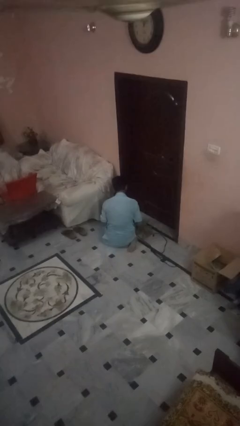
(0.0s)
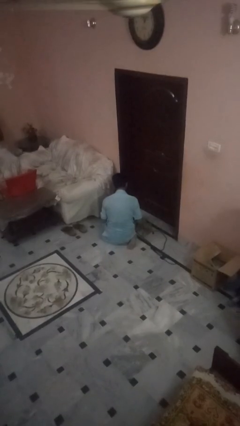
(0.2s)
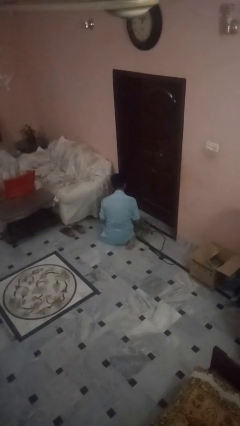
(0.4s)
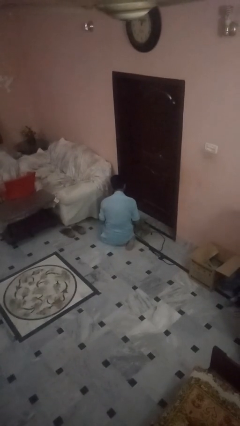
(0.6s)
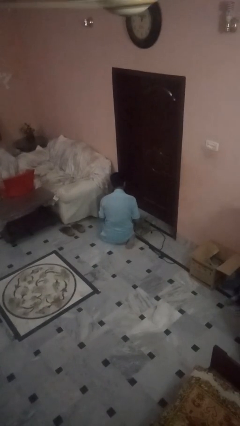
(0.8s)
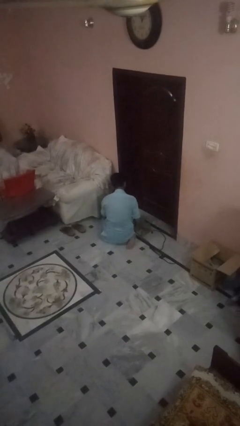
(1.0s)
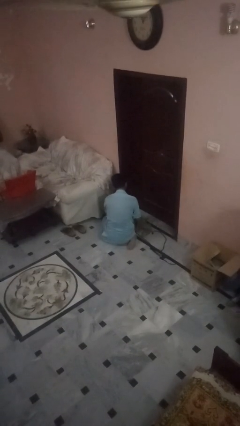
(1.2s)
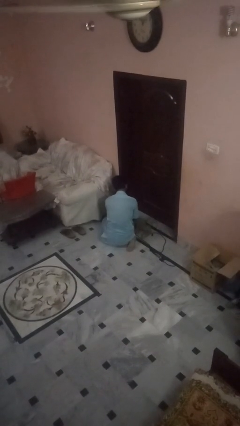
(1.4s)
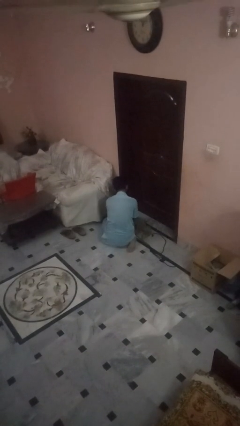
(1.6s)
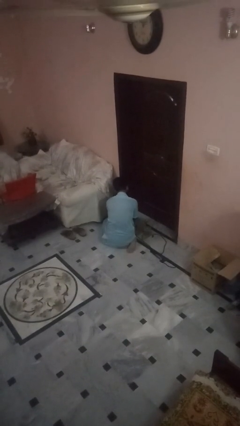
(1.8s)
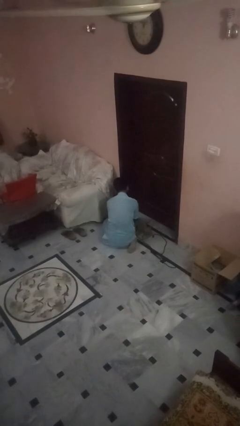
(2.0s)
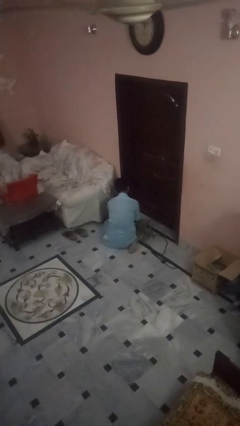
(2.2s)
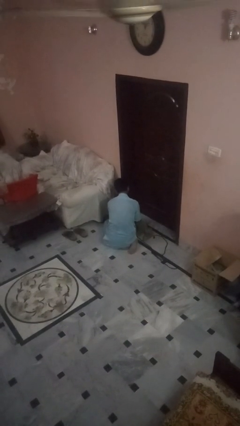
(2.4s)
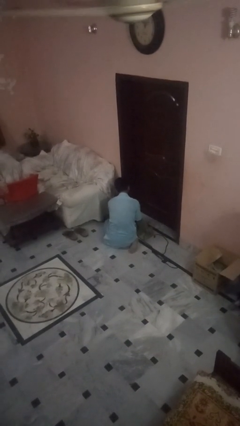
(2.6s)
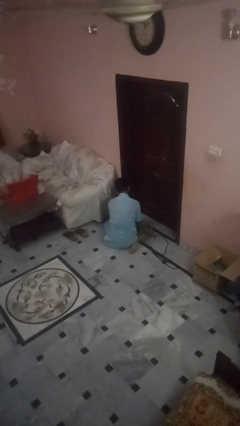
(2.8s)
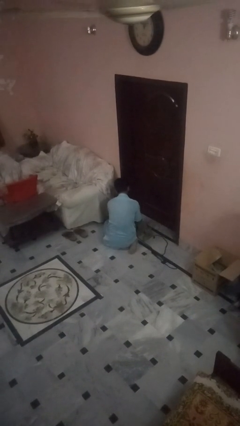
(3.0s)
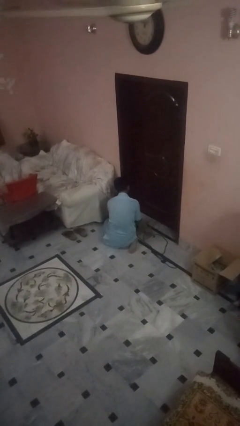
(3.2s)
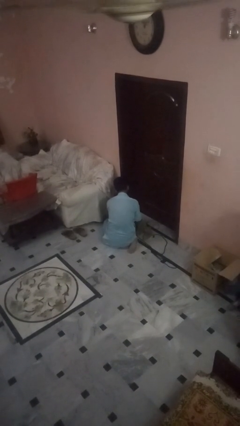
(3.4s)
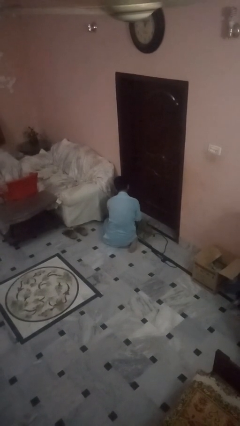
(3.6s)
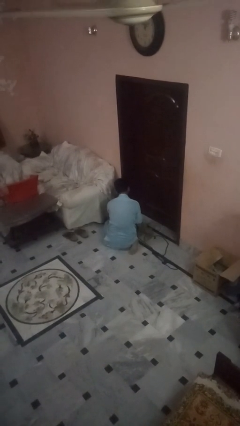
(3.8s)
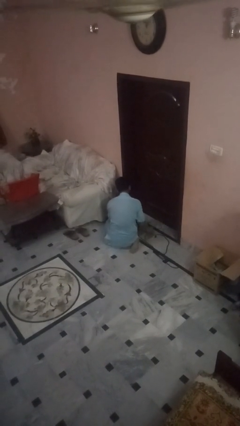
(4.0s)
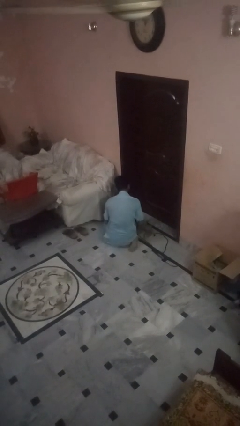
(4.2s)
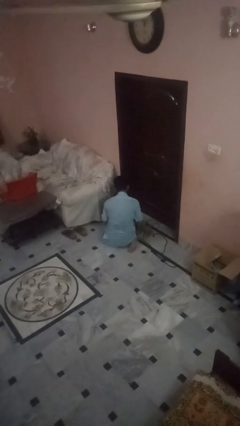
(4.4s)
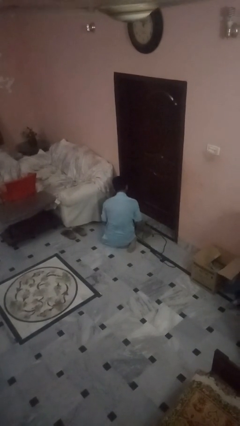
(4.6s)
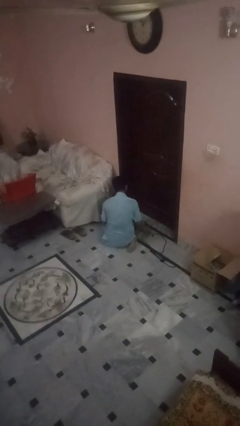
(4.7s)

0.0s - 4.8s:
person attaches leash to dog

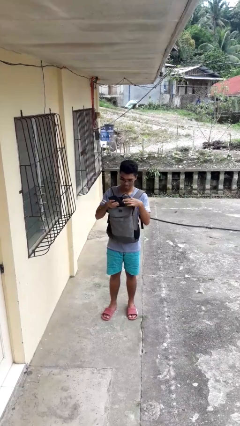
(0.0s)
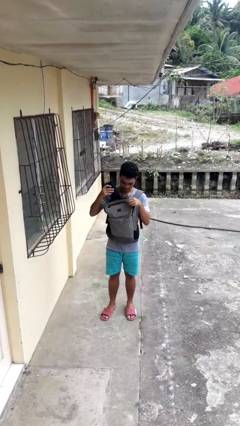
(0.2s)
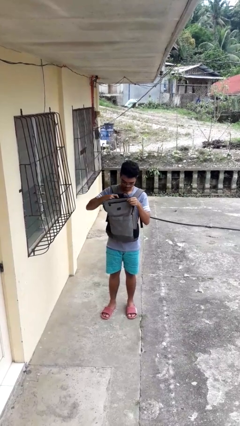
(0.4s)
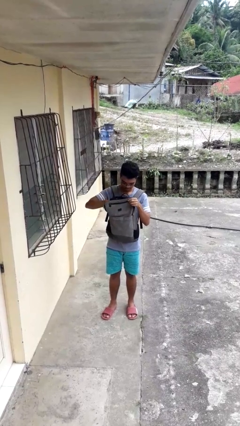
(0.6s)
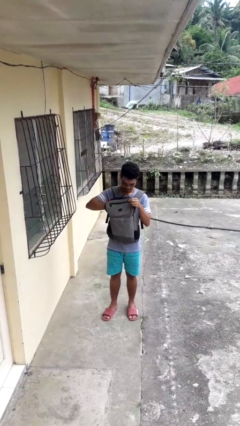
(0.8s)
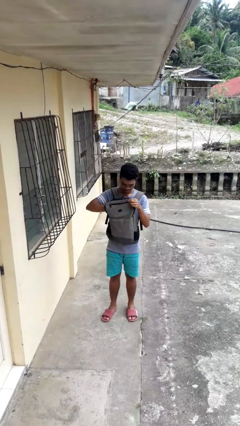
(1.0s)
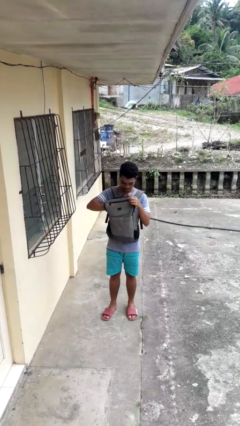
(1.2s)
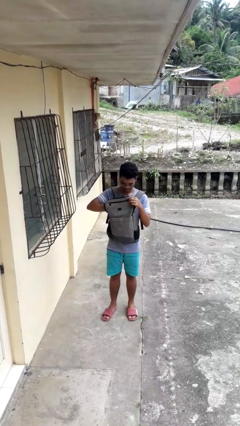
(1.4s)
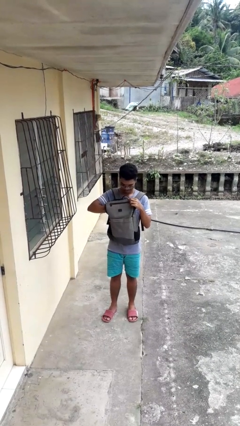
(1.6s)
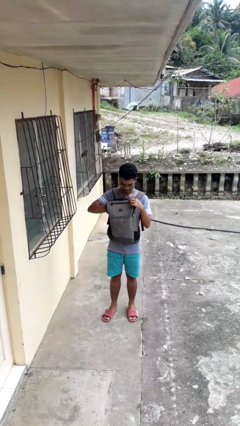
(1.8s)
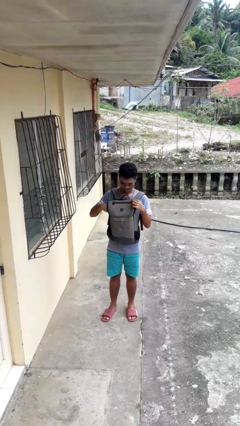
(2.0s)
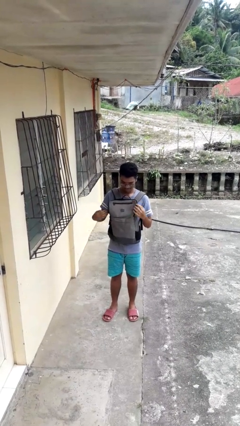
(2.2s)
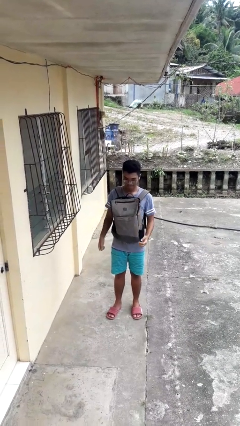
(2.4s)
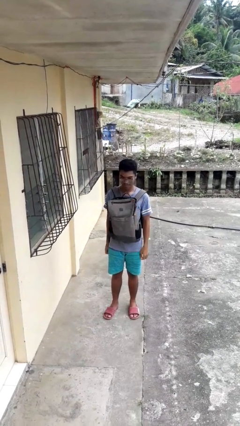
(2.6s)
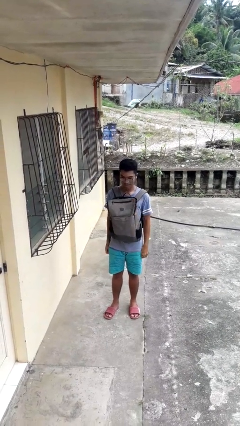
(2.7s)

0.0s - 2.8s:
person puts object into backpack

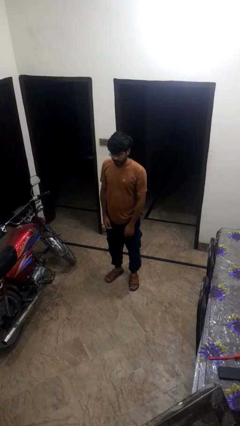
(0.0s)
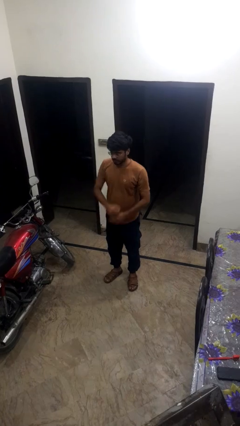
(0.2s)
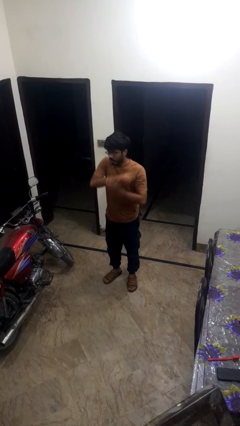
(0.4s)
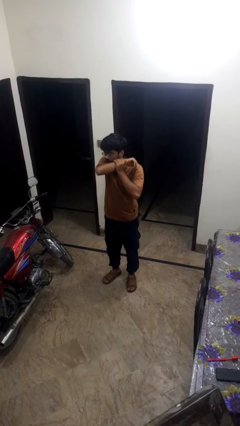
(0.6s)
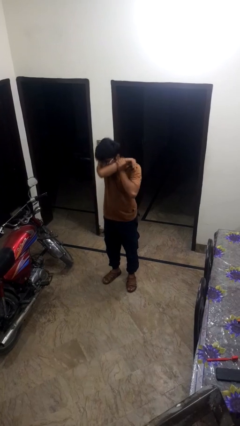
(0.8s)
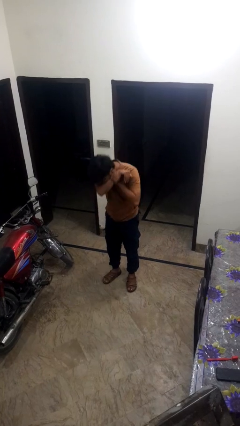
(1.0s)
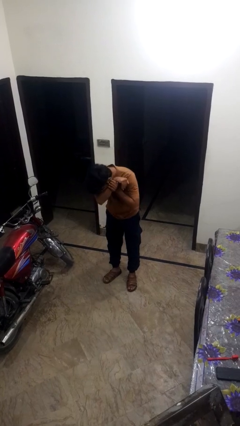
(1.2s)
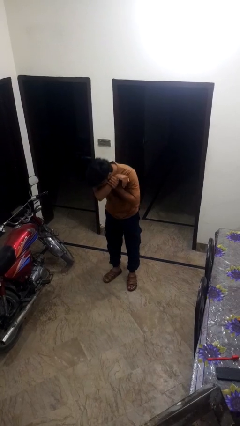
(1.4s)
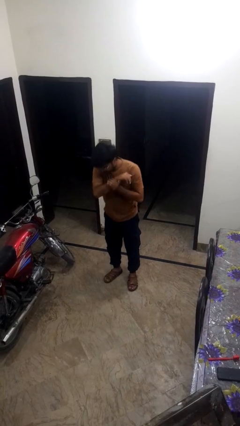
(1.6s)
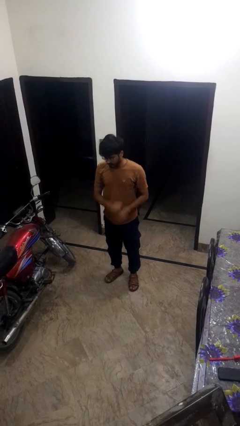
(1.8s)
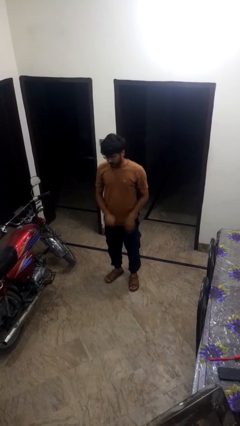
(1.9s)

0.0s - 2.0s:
person sneezes into arm

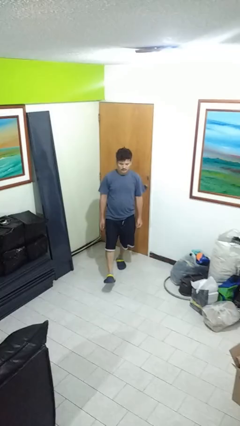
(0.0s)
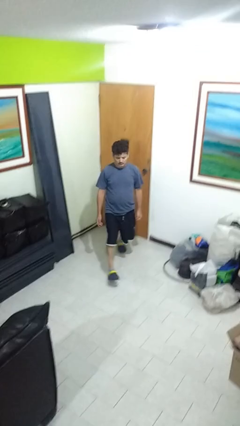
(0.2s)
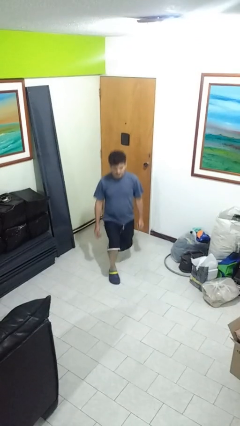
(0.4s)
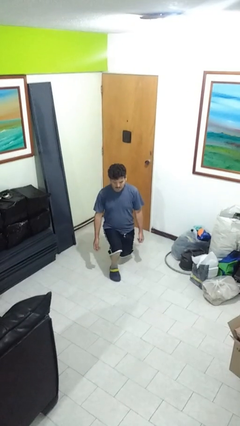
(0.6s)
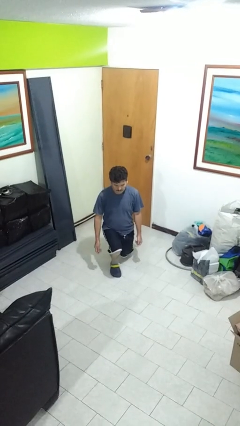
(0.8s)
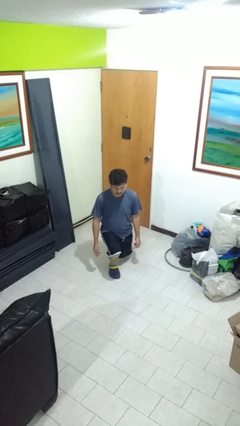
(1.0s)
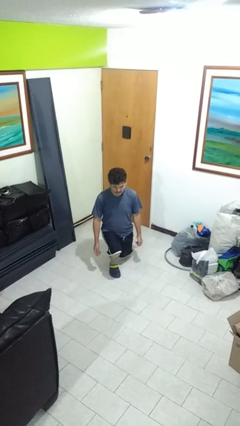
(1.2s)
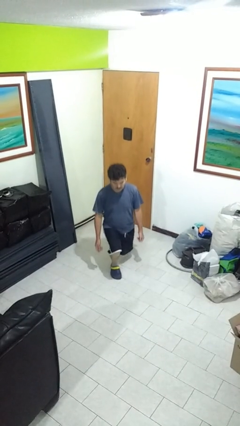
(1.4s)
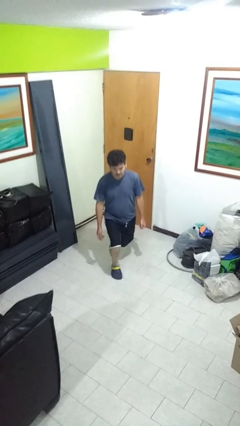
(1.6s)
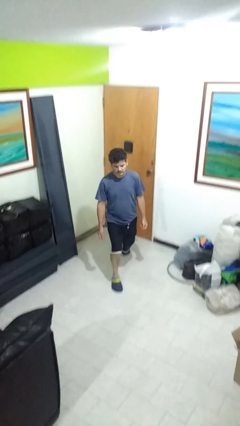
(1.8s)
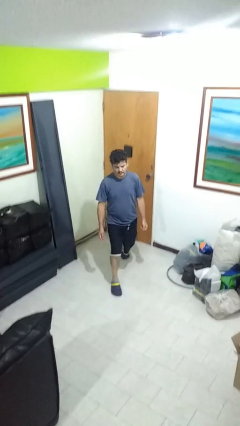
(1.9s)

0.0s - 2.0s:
person exercises with lunges

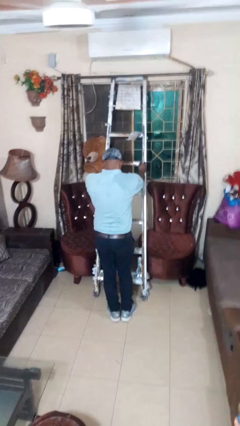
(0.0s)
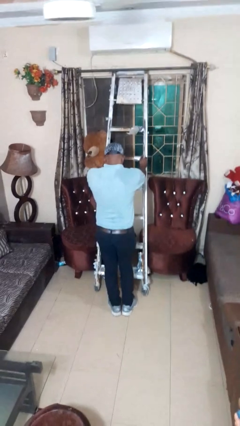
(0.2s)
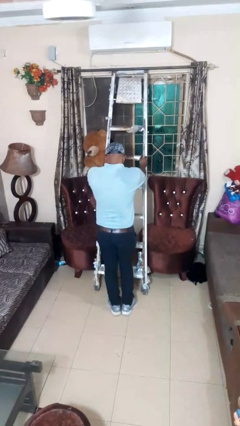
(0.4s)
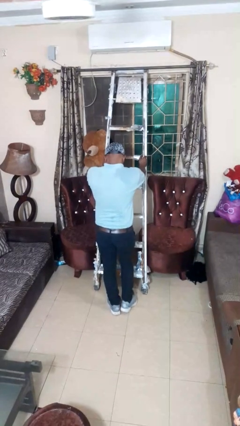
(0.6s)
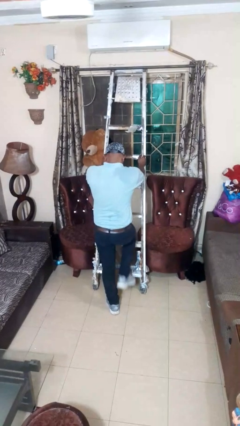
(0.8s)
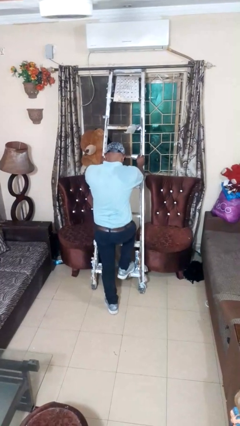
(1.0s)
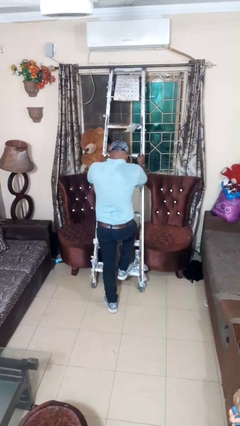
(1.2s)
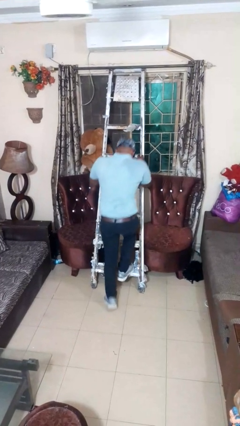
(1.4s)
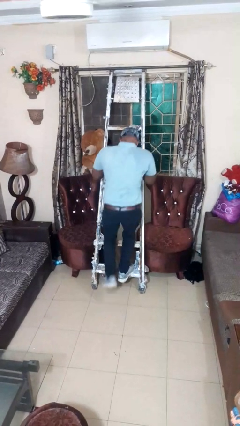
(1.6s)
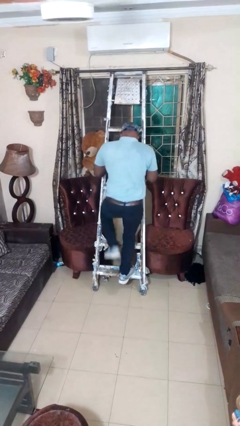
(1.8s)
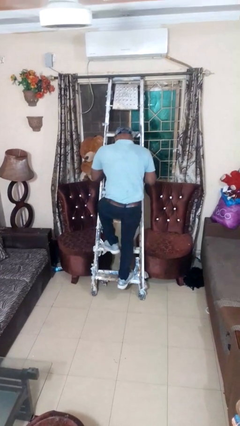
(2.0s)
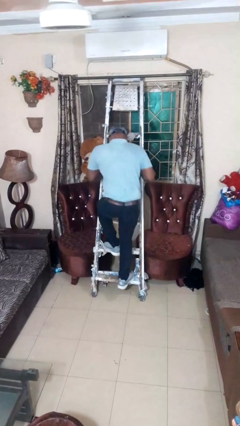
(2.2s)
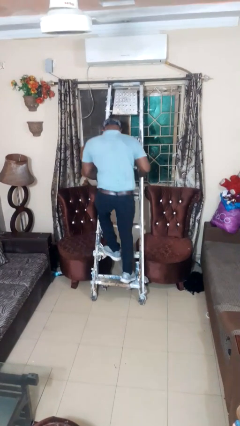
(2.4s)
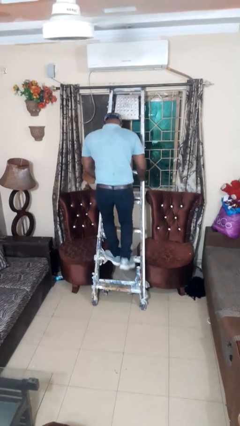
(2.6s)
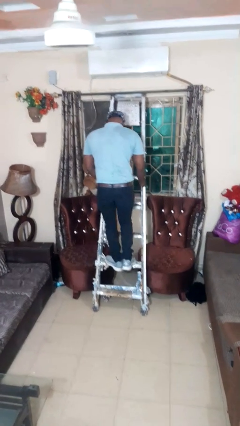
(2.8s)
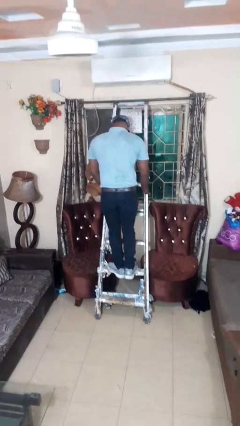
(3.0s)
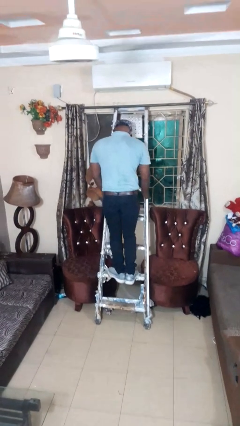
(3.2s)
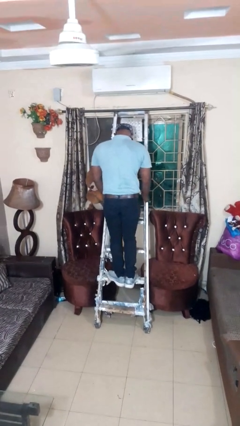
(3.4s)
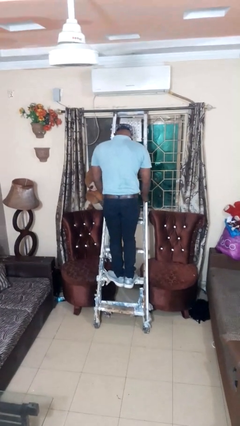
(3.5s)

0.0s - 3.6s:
person climbs up ladder

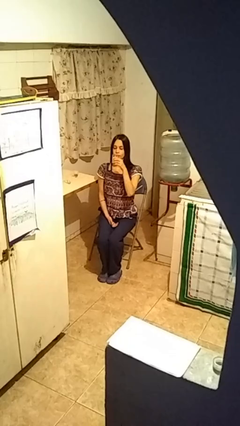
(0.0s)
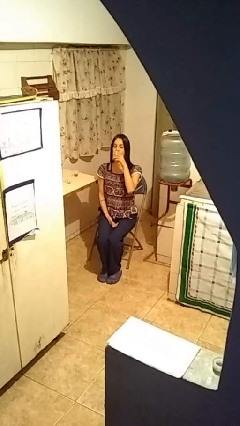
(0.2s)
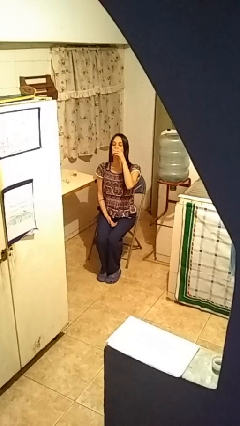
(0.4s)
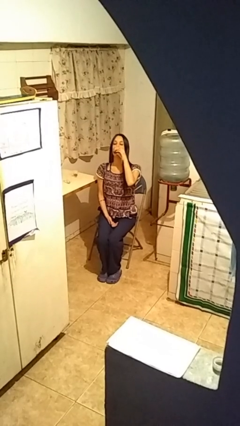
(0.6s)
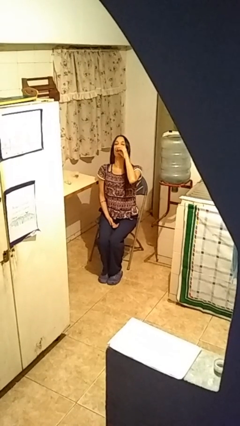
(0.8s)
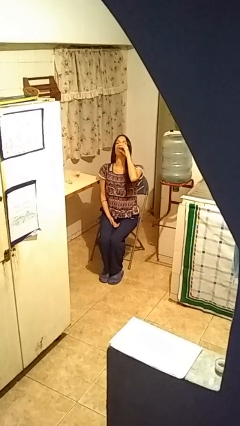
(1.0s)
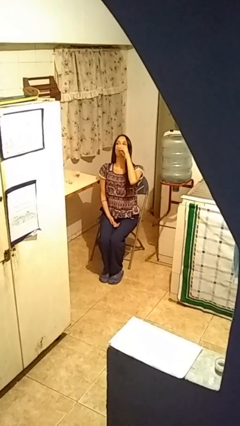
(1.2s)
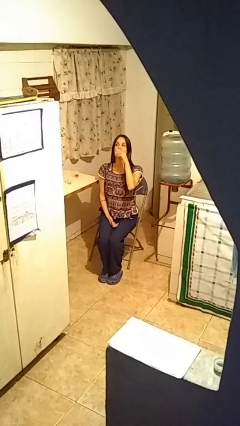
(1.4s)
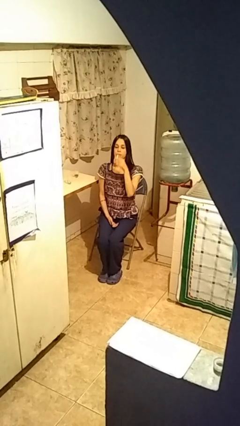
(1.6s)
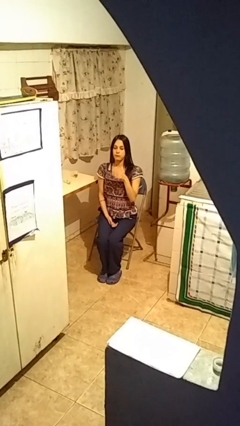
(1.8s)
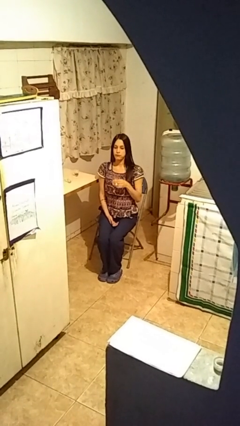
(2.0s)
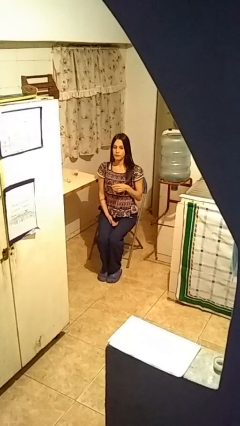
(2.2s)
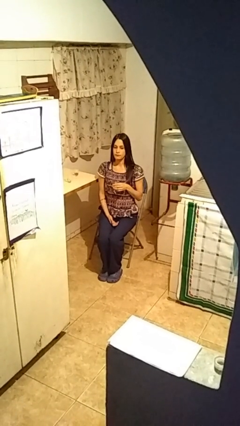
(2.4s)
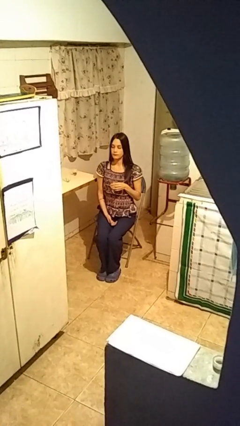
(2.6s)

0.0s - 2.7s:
person drinks from shotglass
